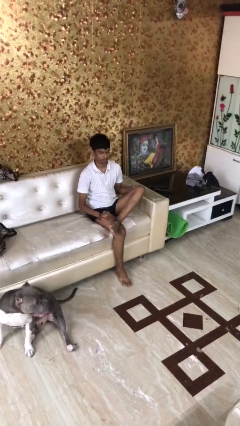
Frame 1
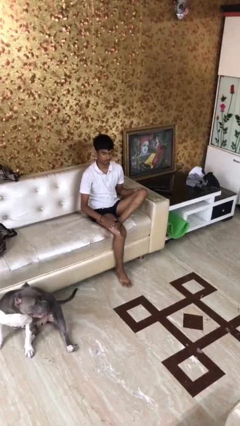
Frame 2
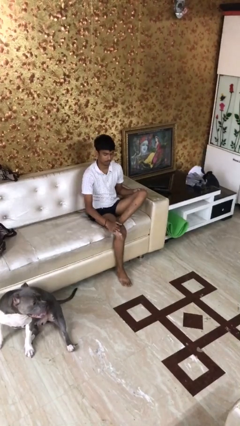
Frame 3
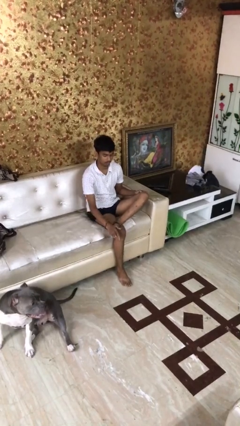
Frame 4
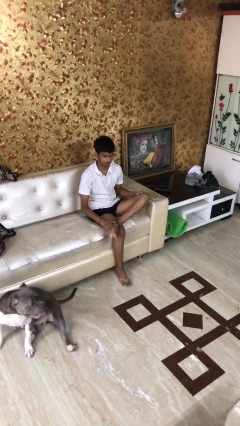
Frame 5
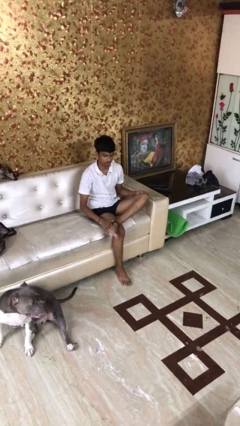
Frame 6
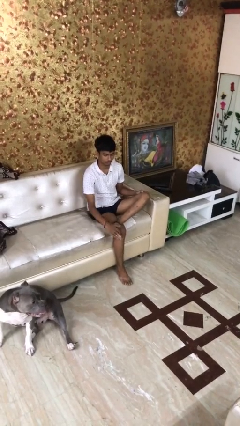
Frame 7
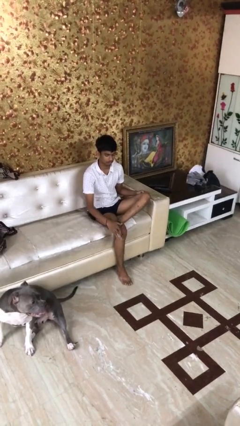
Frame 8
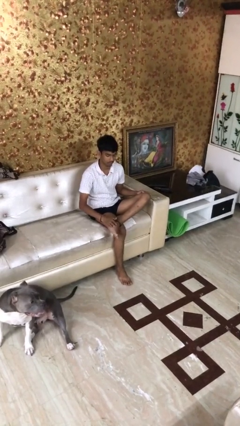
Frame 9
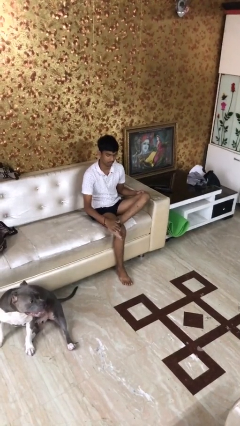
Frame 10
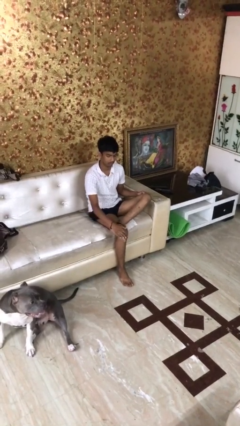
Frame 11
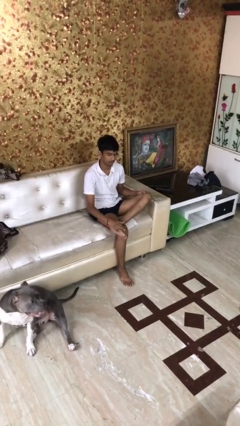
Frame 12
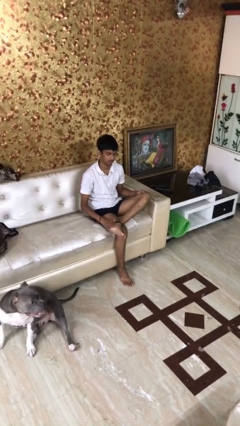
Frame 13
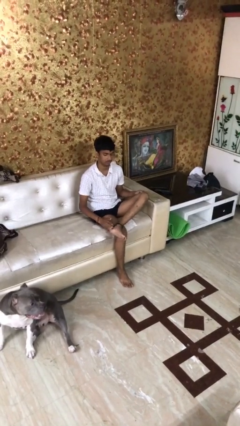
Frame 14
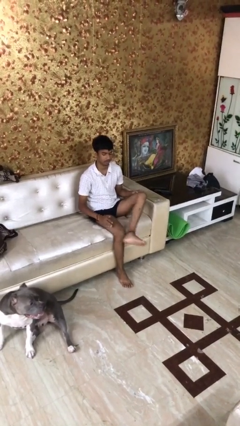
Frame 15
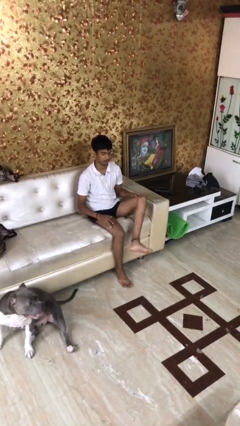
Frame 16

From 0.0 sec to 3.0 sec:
person rubs foot

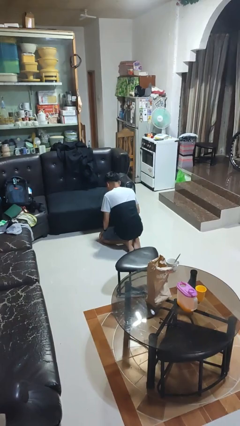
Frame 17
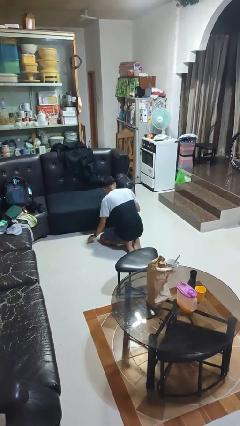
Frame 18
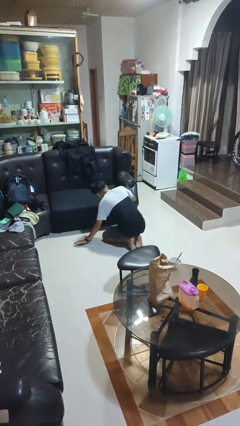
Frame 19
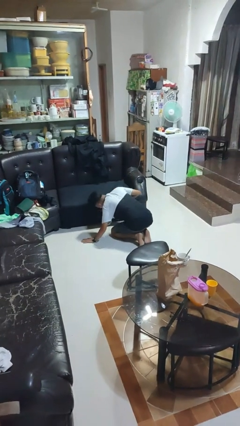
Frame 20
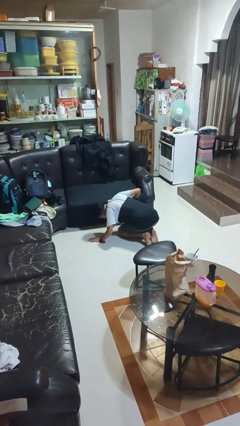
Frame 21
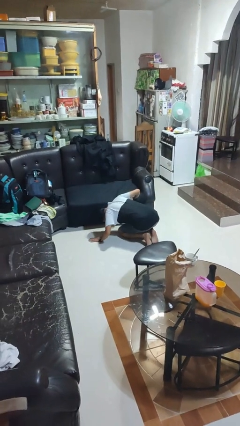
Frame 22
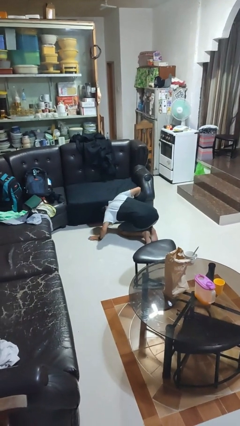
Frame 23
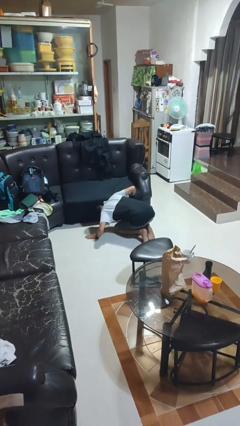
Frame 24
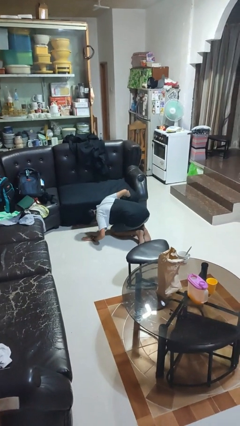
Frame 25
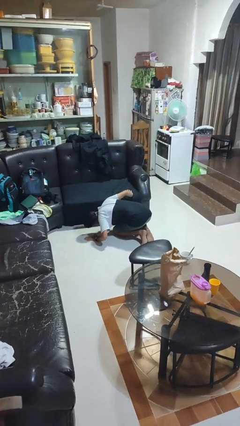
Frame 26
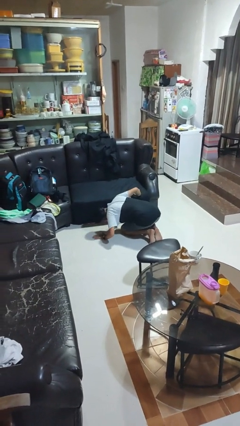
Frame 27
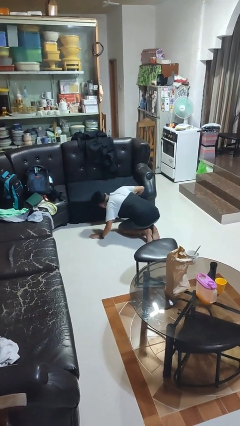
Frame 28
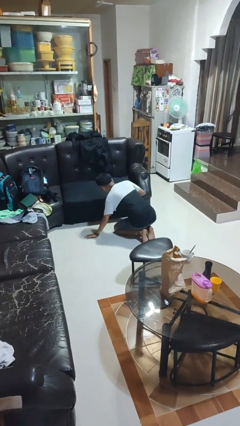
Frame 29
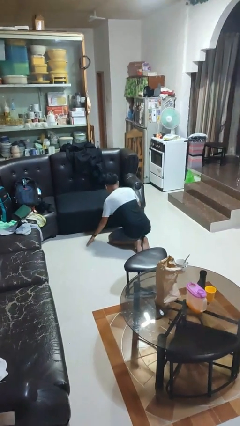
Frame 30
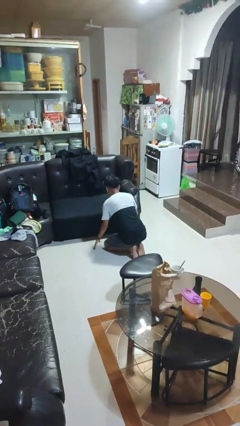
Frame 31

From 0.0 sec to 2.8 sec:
person searches under couch

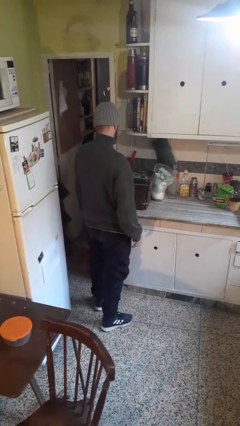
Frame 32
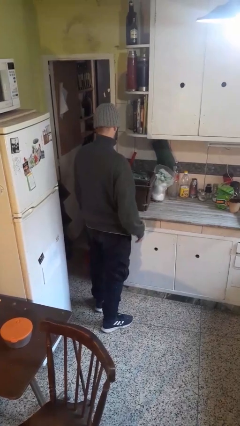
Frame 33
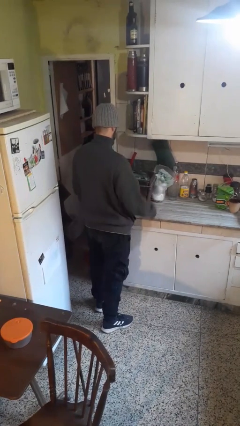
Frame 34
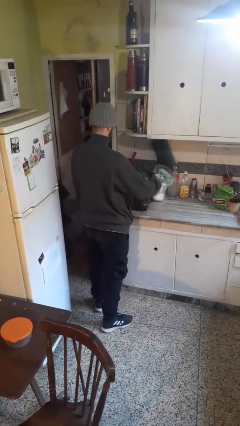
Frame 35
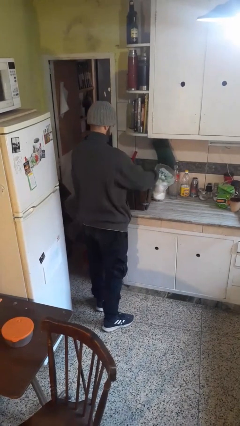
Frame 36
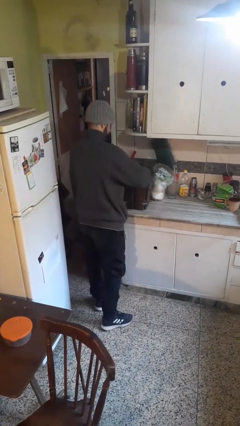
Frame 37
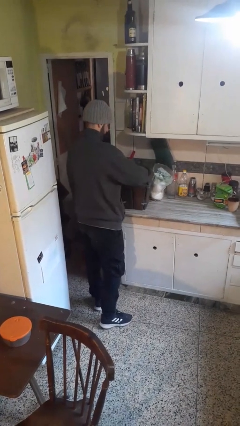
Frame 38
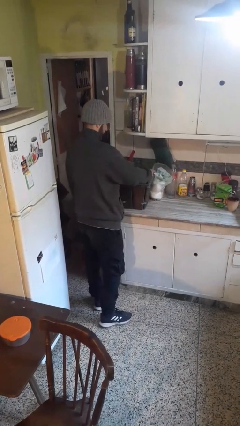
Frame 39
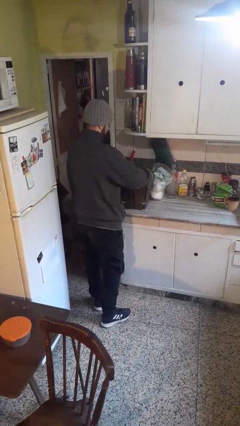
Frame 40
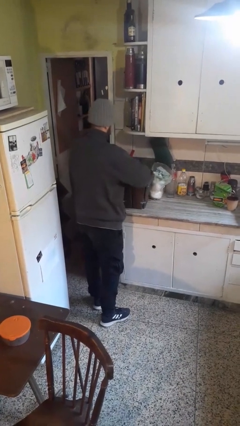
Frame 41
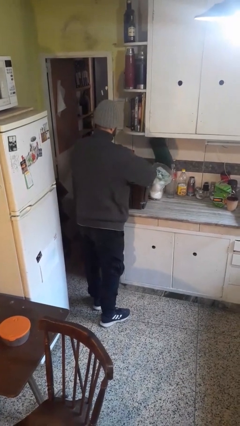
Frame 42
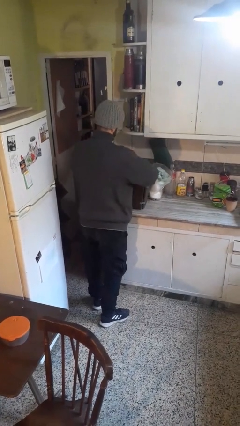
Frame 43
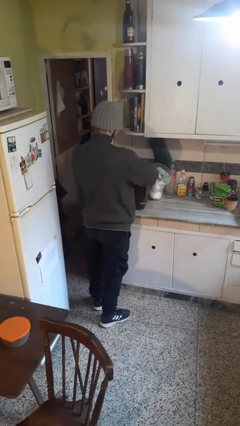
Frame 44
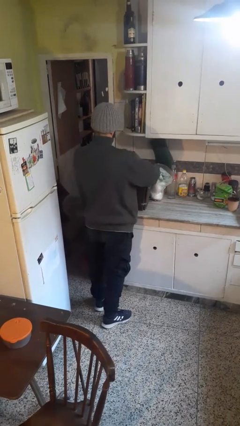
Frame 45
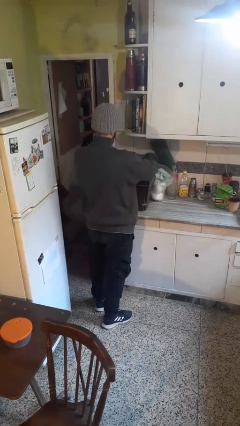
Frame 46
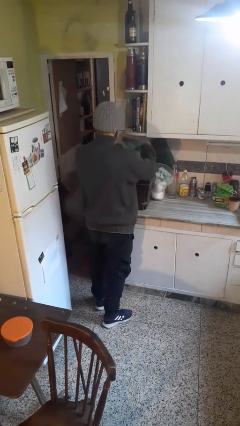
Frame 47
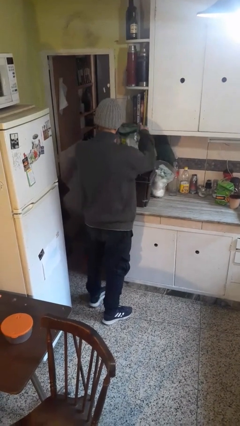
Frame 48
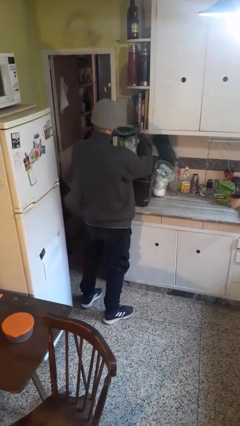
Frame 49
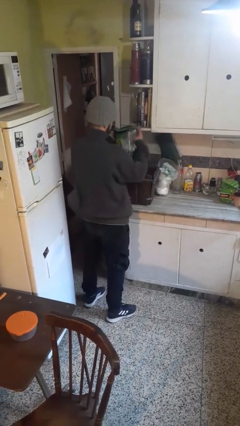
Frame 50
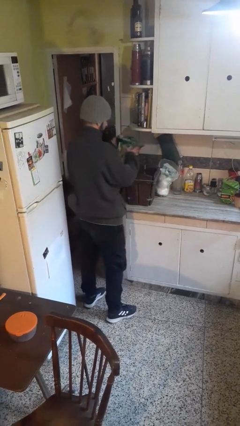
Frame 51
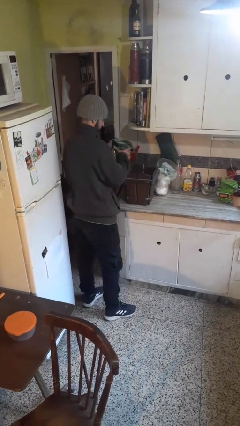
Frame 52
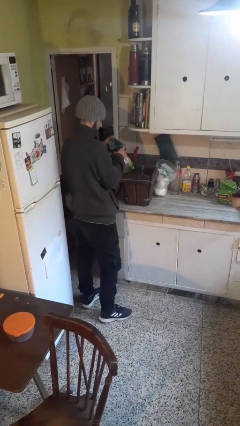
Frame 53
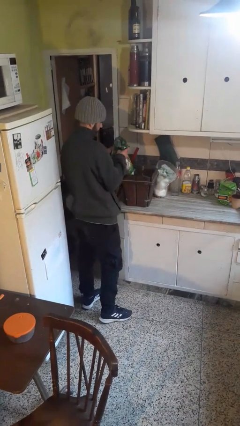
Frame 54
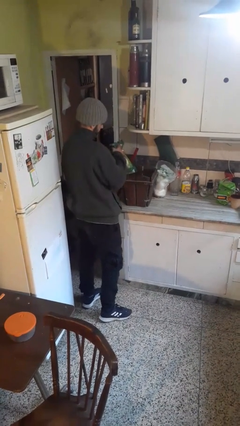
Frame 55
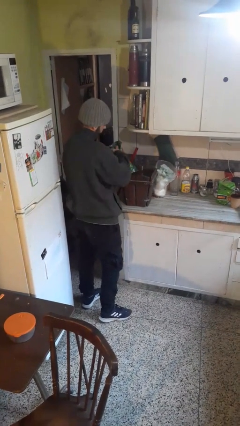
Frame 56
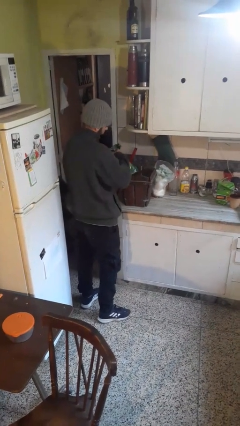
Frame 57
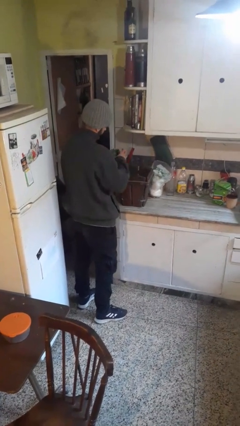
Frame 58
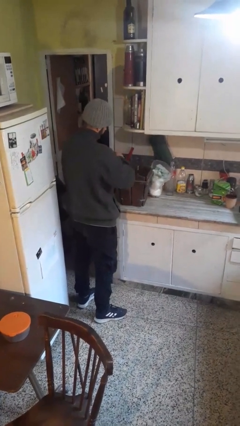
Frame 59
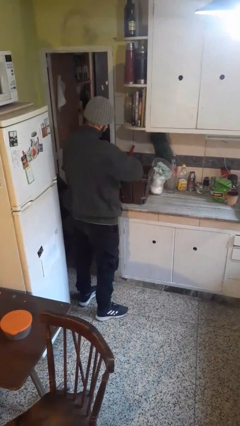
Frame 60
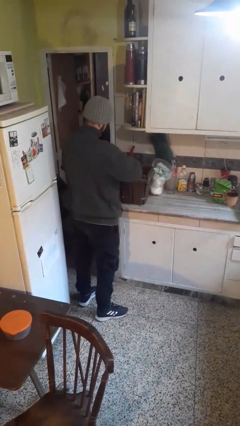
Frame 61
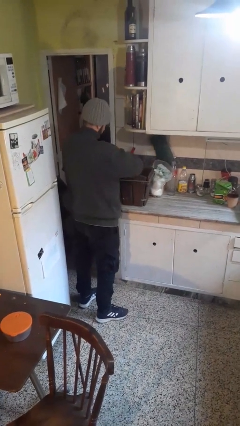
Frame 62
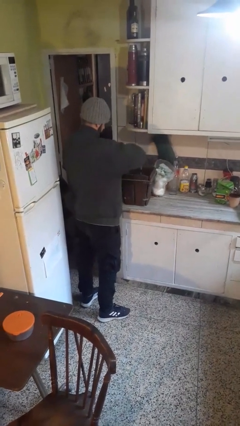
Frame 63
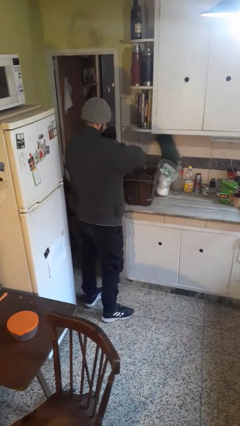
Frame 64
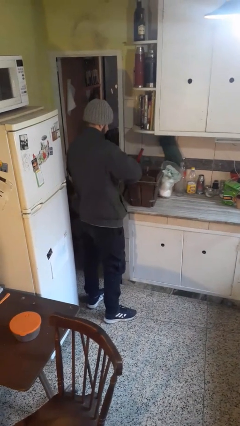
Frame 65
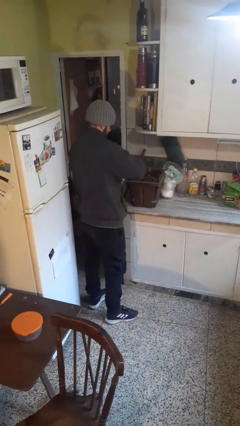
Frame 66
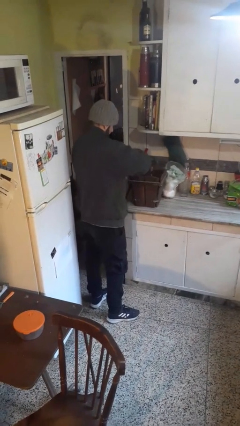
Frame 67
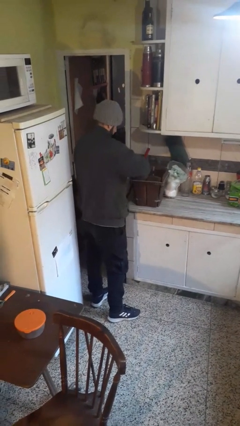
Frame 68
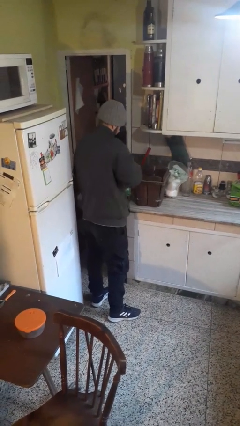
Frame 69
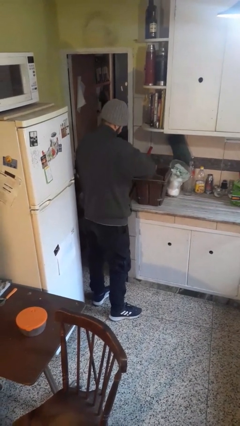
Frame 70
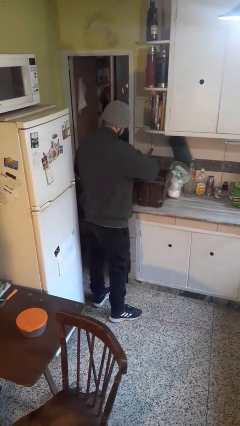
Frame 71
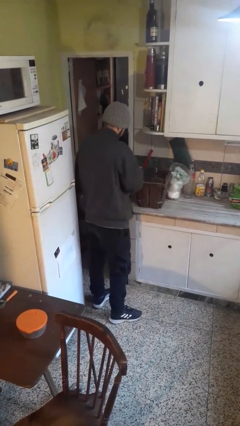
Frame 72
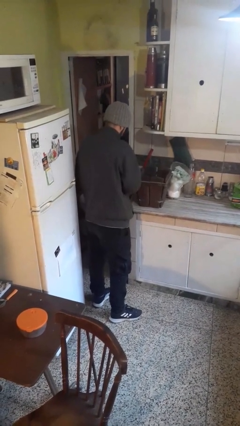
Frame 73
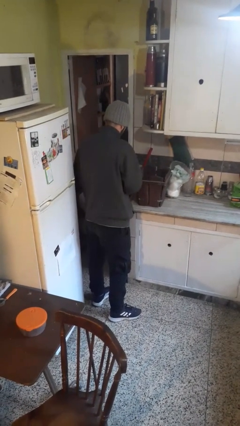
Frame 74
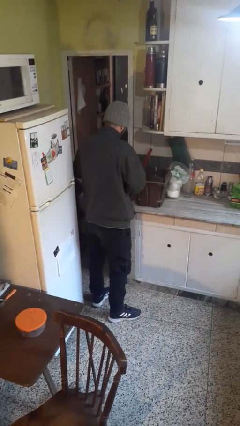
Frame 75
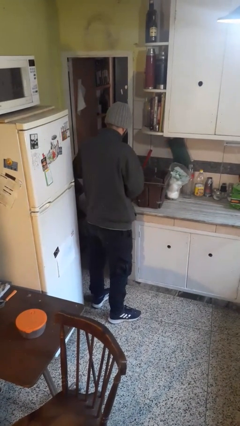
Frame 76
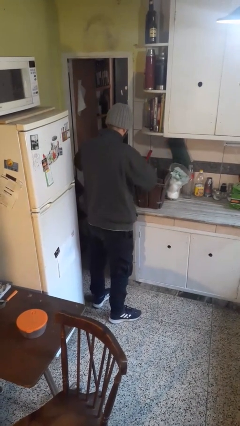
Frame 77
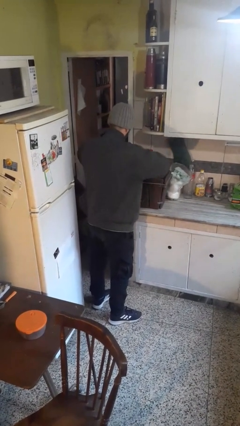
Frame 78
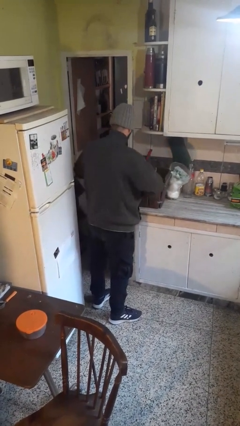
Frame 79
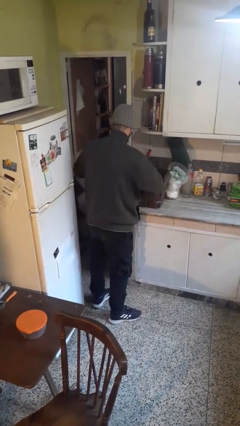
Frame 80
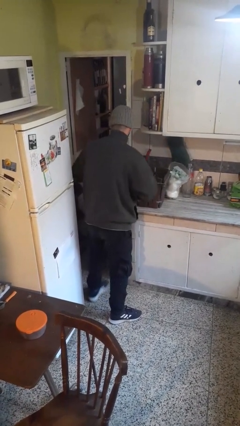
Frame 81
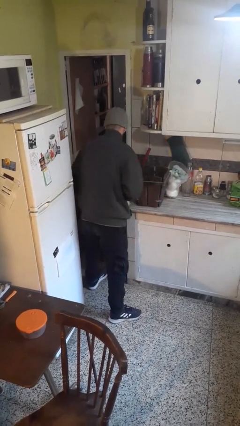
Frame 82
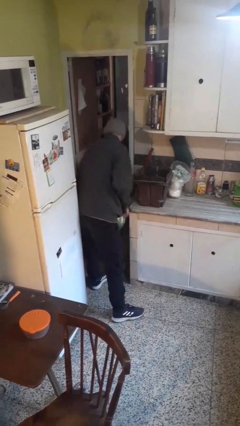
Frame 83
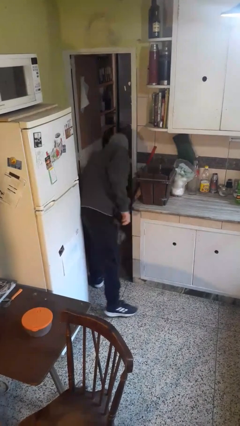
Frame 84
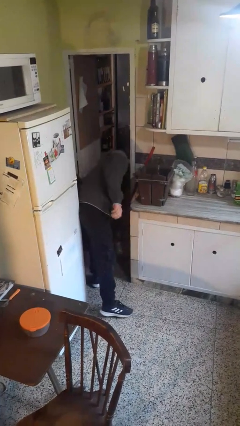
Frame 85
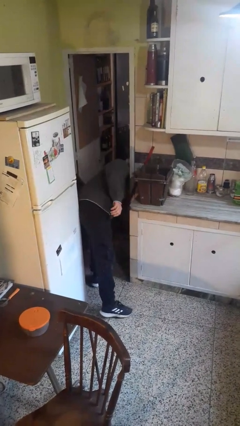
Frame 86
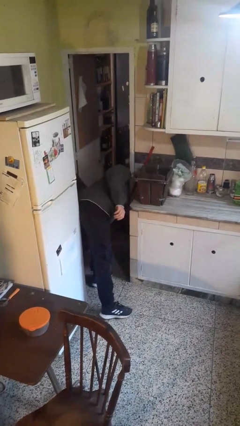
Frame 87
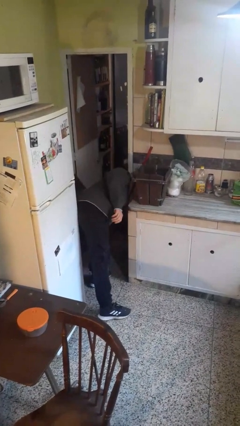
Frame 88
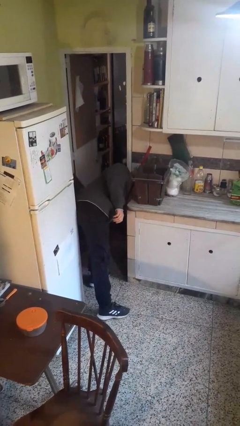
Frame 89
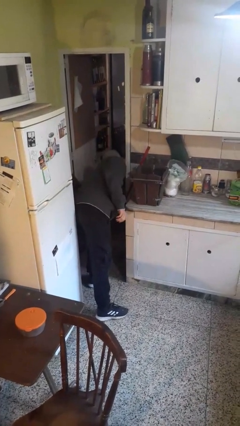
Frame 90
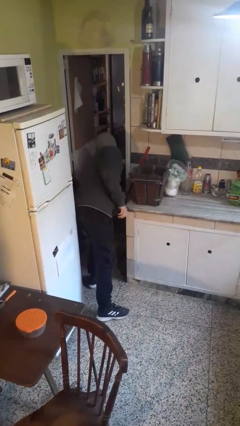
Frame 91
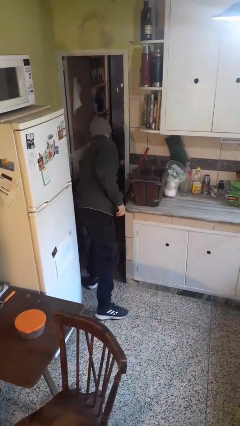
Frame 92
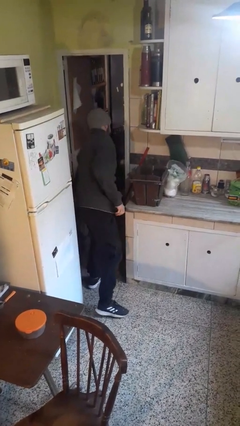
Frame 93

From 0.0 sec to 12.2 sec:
person removes trashbag from trashcan
